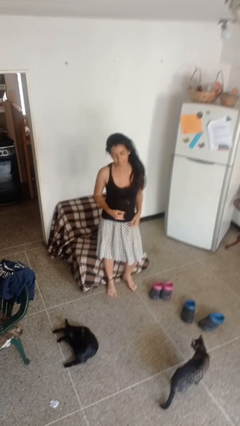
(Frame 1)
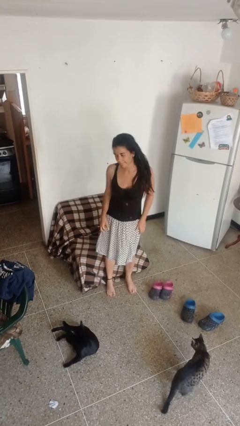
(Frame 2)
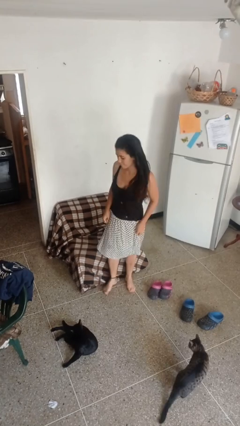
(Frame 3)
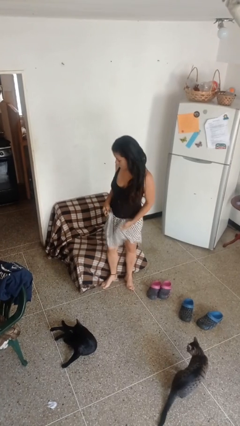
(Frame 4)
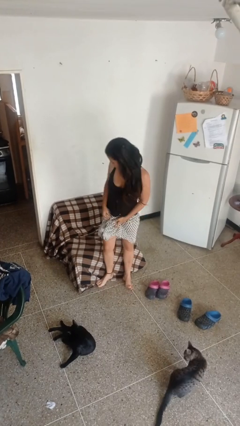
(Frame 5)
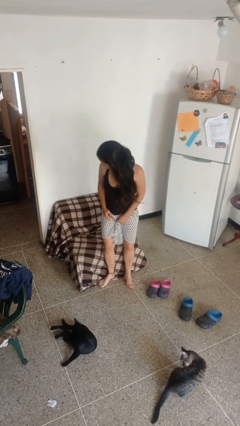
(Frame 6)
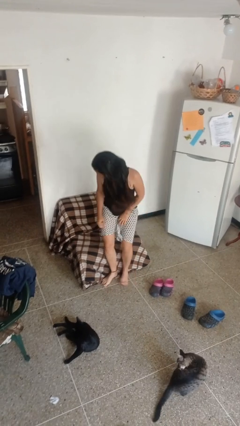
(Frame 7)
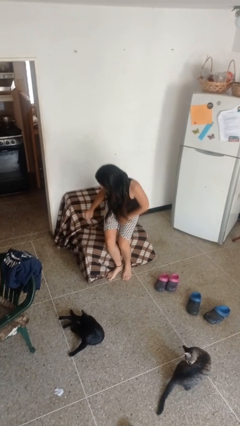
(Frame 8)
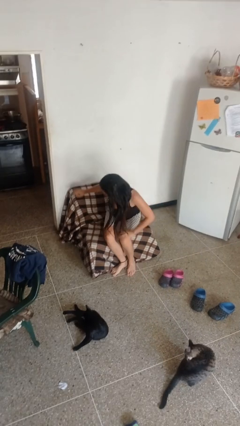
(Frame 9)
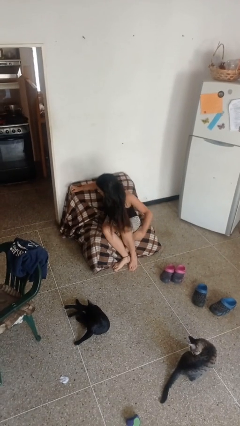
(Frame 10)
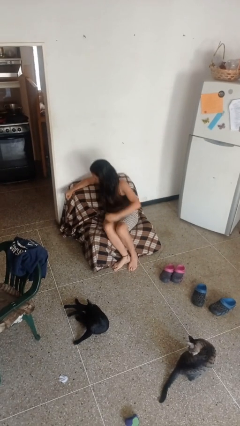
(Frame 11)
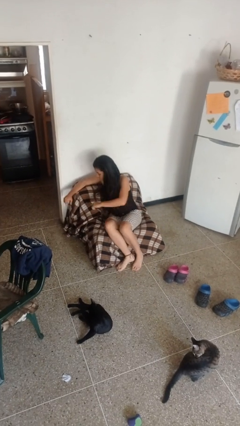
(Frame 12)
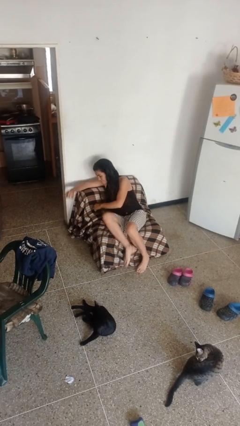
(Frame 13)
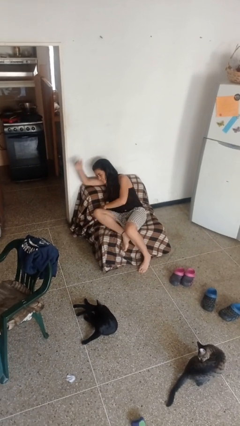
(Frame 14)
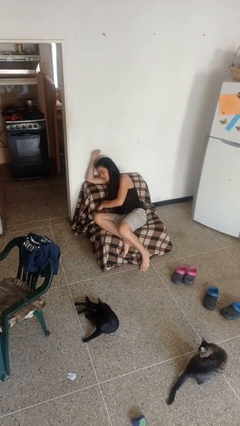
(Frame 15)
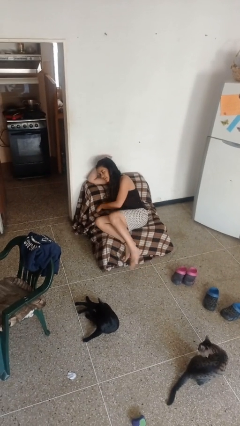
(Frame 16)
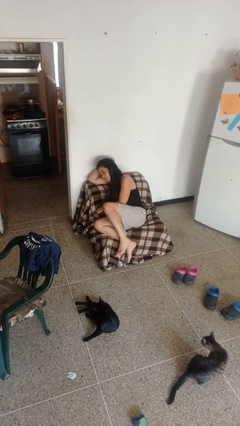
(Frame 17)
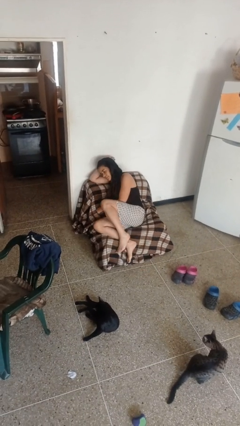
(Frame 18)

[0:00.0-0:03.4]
person lies down on couch

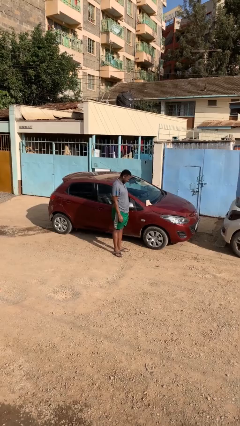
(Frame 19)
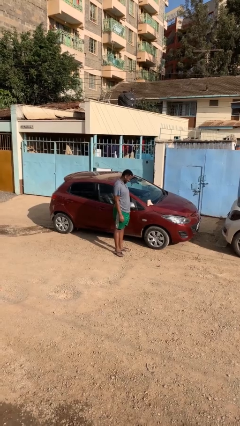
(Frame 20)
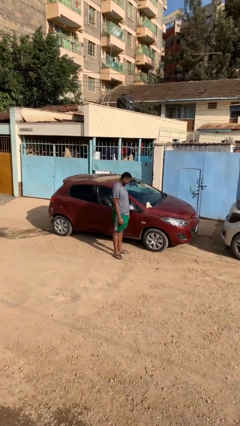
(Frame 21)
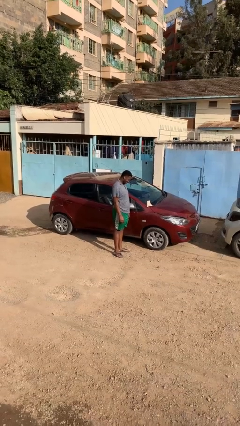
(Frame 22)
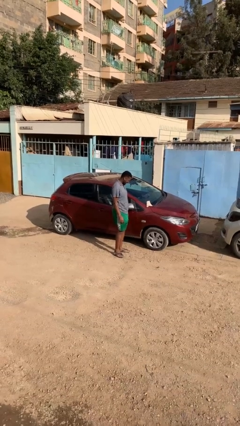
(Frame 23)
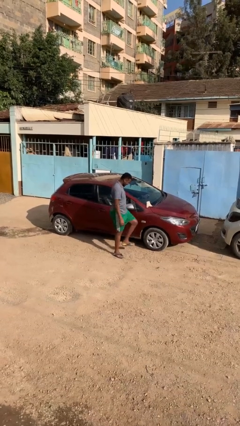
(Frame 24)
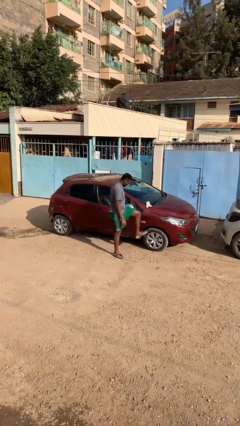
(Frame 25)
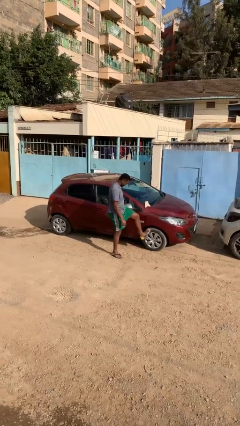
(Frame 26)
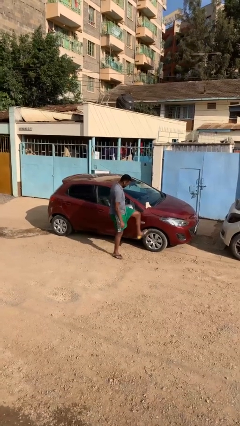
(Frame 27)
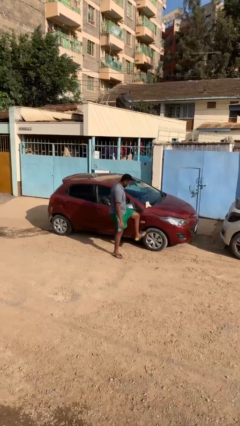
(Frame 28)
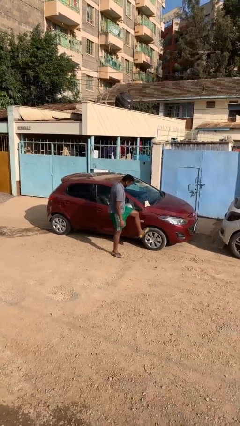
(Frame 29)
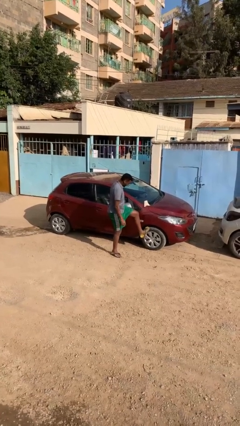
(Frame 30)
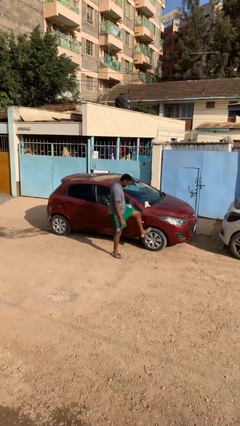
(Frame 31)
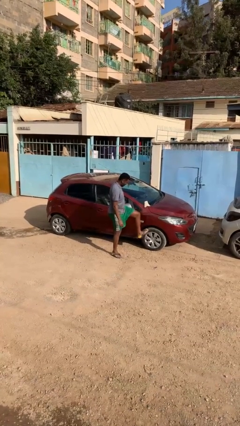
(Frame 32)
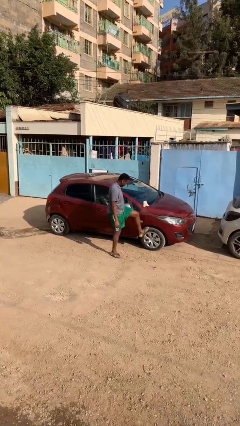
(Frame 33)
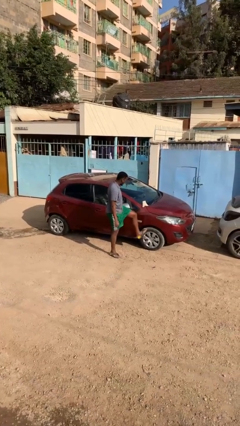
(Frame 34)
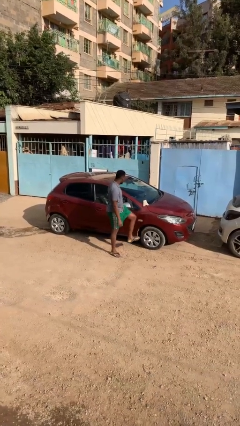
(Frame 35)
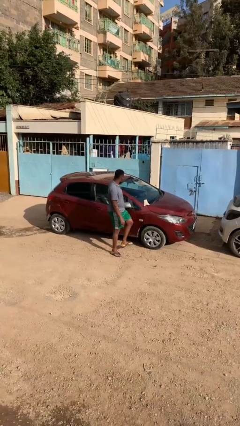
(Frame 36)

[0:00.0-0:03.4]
person kicks car tires

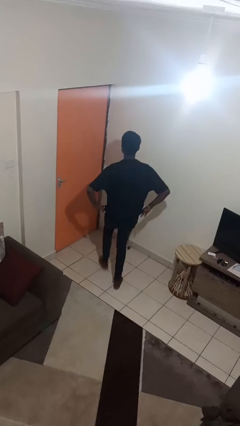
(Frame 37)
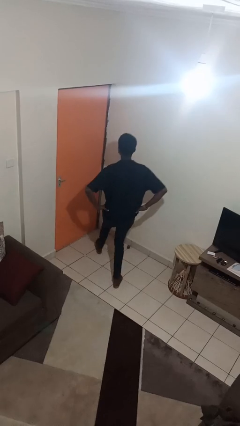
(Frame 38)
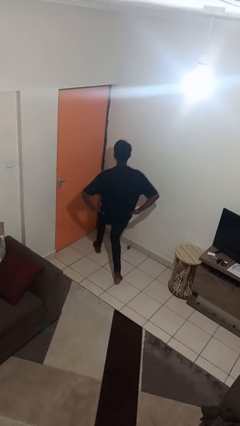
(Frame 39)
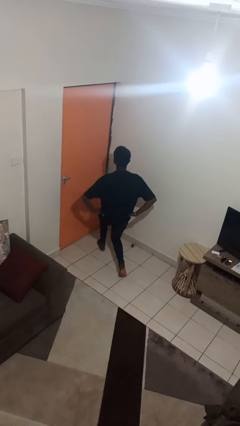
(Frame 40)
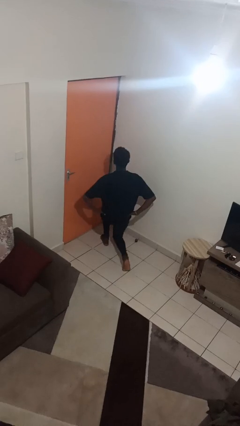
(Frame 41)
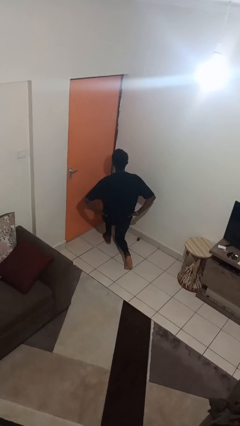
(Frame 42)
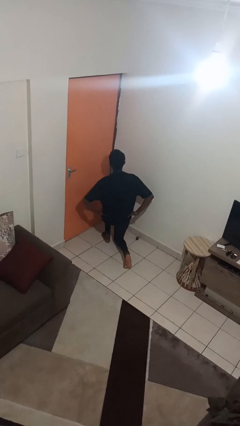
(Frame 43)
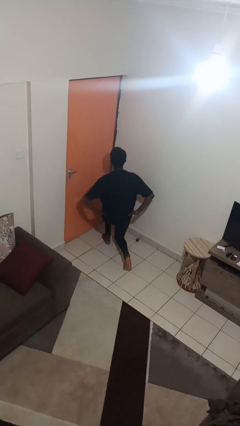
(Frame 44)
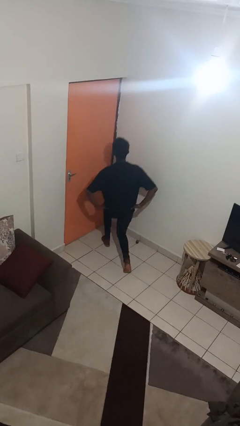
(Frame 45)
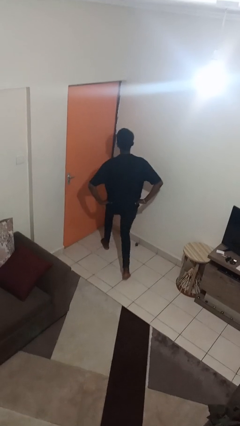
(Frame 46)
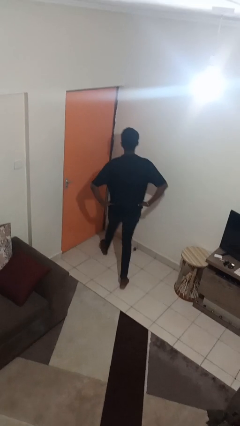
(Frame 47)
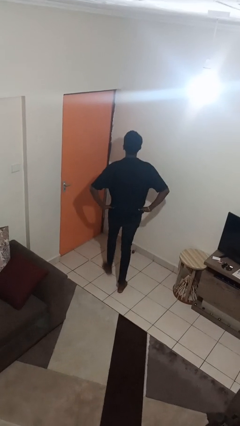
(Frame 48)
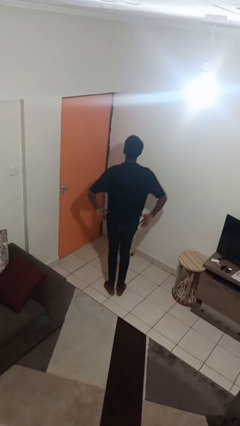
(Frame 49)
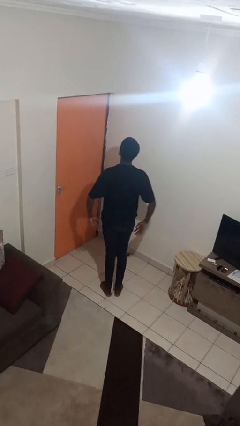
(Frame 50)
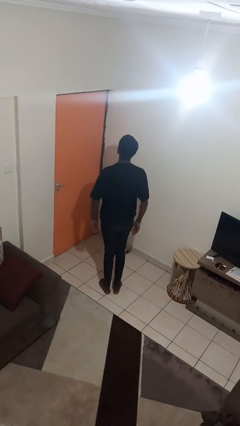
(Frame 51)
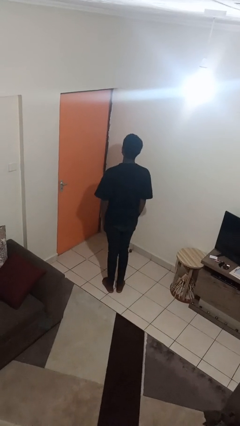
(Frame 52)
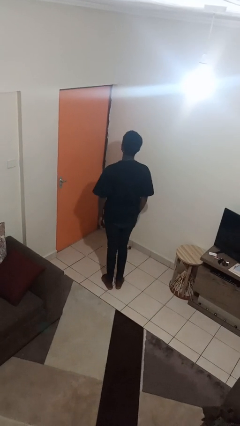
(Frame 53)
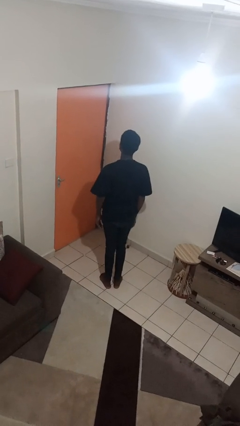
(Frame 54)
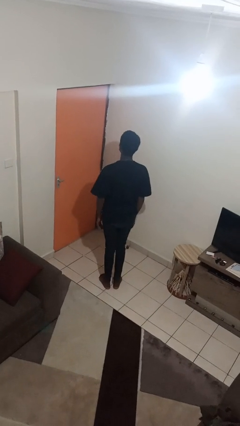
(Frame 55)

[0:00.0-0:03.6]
person exercises with lunges

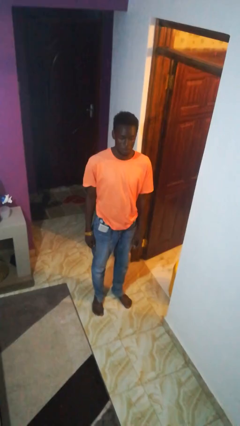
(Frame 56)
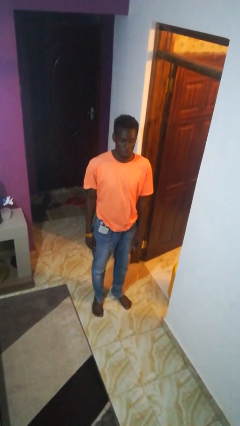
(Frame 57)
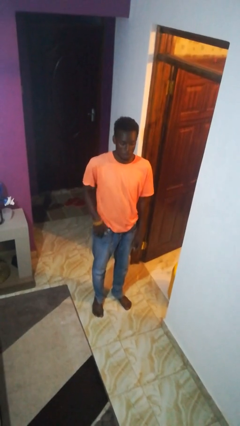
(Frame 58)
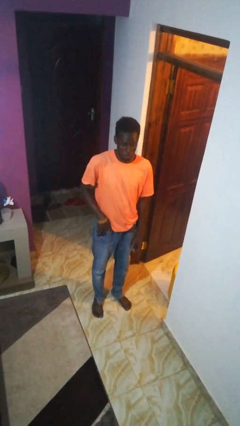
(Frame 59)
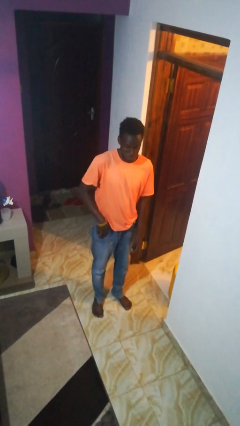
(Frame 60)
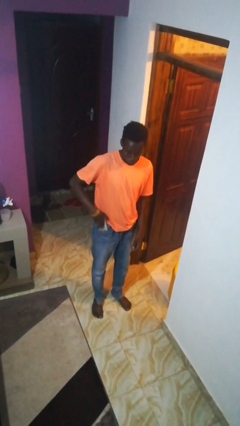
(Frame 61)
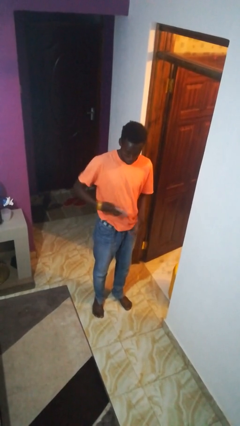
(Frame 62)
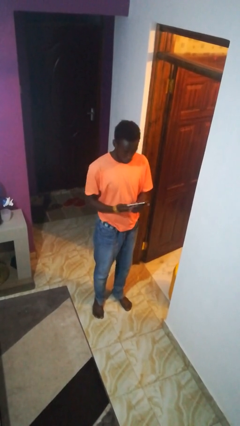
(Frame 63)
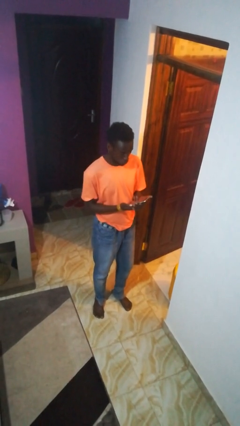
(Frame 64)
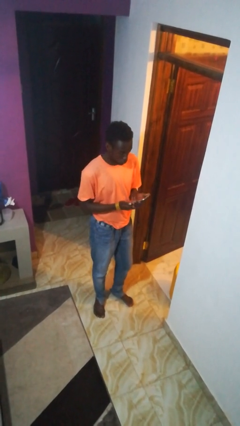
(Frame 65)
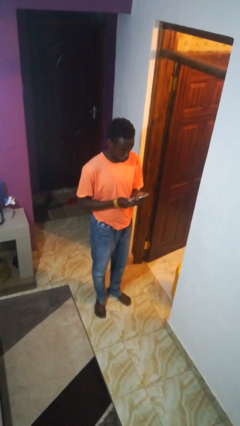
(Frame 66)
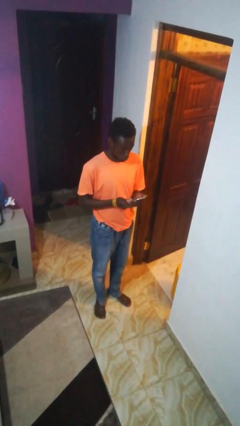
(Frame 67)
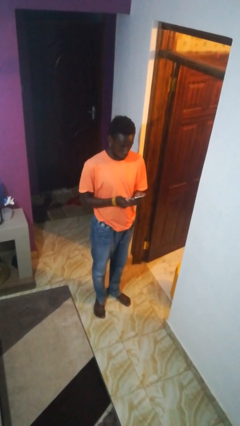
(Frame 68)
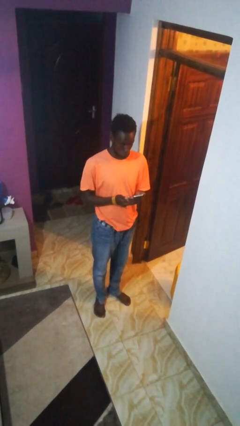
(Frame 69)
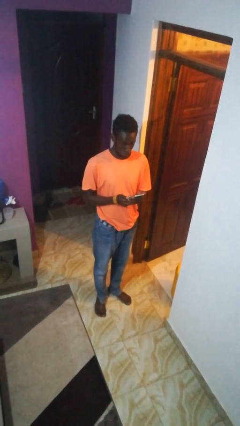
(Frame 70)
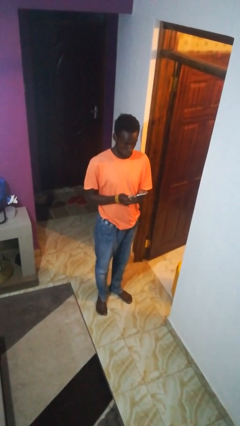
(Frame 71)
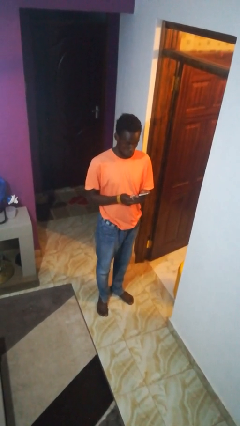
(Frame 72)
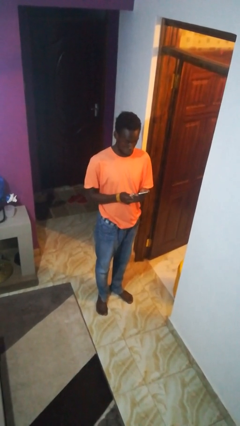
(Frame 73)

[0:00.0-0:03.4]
person takes phone from pocket

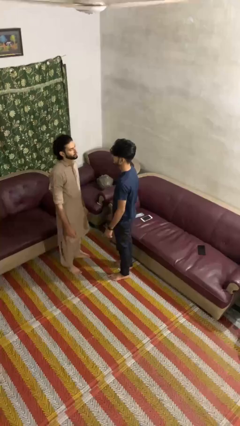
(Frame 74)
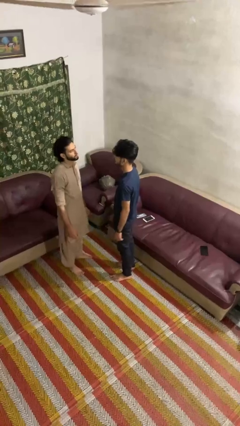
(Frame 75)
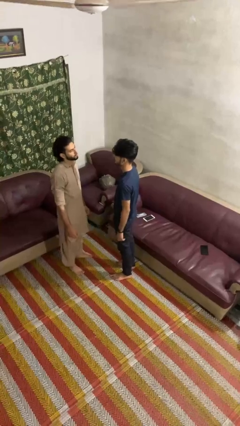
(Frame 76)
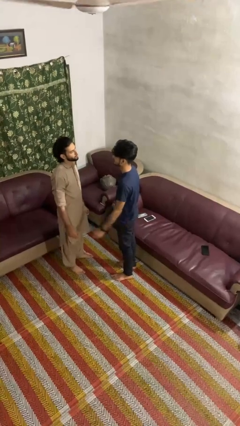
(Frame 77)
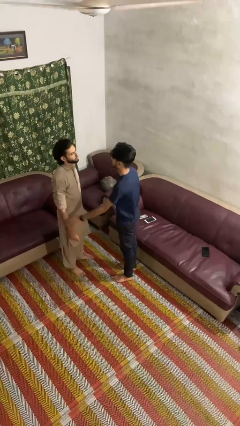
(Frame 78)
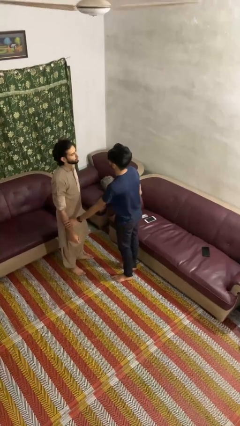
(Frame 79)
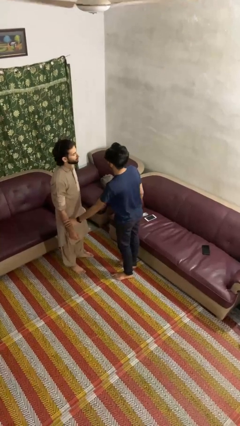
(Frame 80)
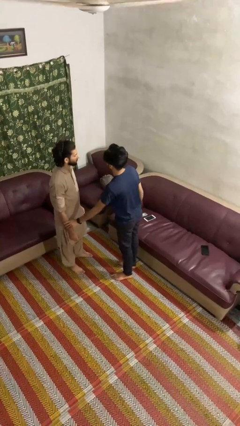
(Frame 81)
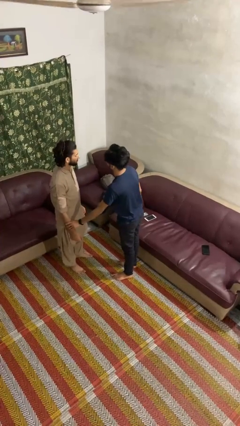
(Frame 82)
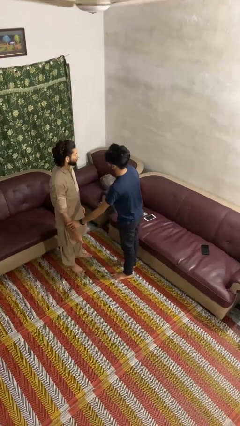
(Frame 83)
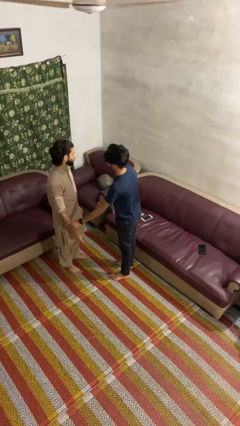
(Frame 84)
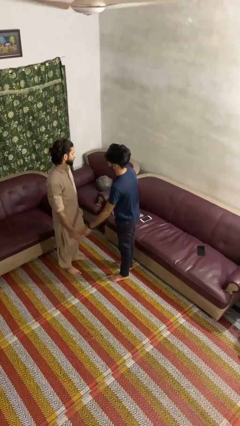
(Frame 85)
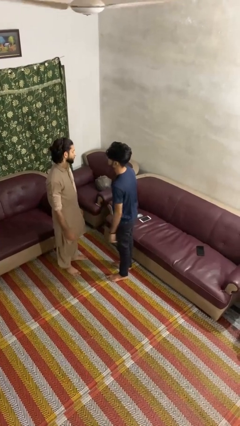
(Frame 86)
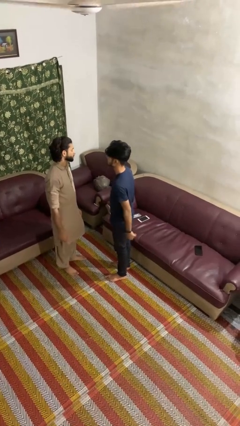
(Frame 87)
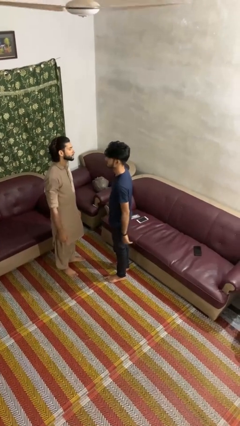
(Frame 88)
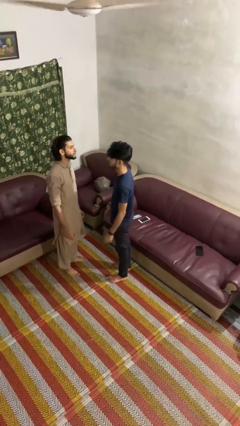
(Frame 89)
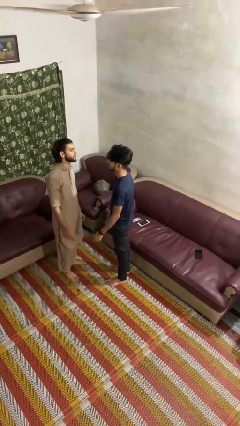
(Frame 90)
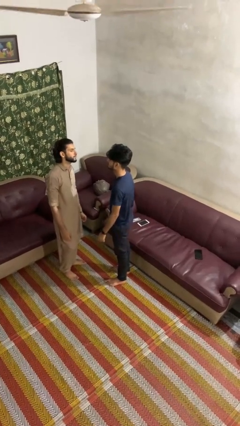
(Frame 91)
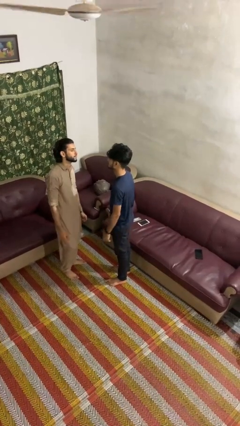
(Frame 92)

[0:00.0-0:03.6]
person grabs person by forearm
